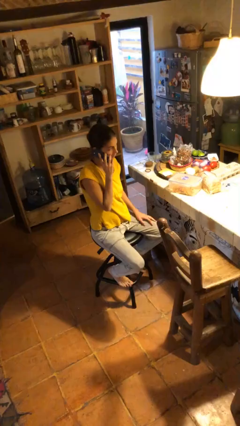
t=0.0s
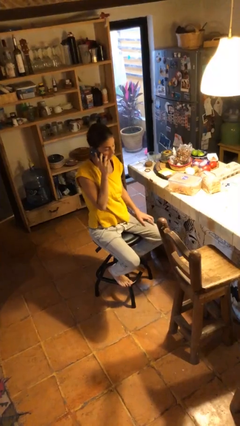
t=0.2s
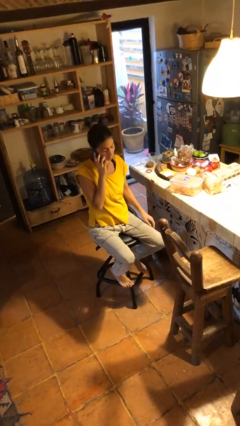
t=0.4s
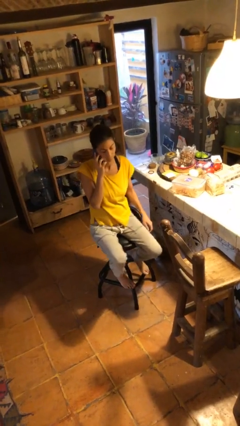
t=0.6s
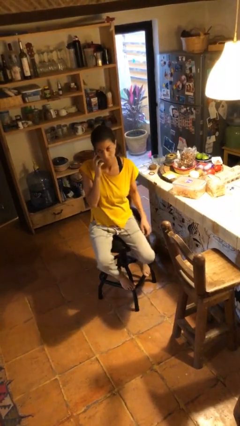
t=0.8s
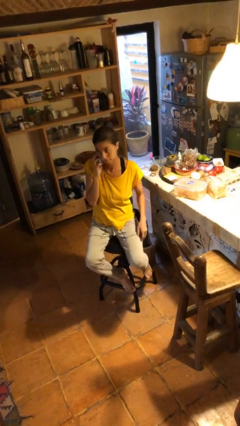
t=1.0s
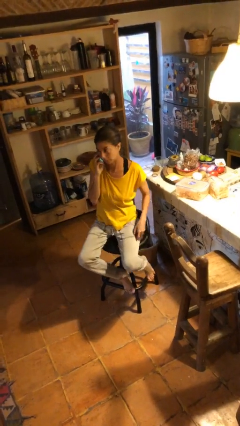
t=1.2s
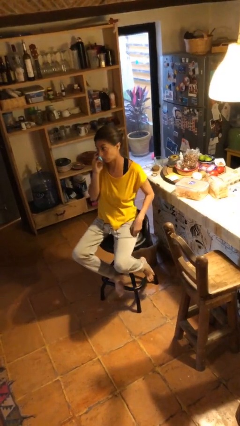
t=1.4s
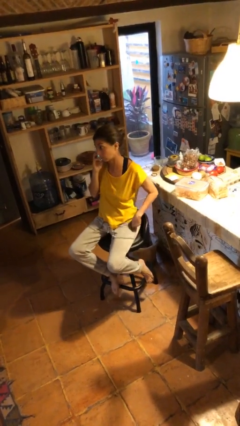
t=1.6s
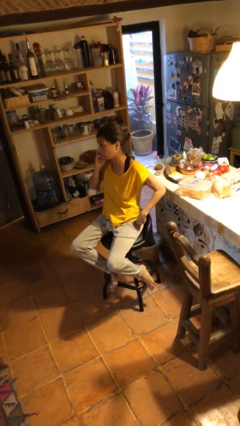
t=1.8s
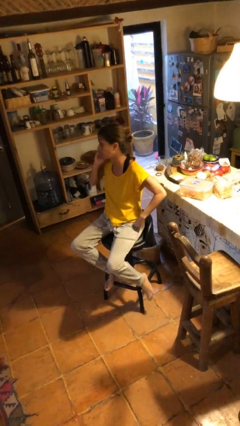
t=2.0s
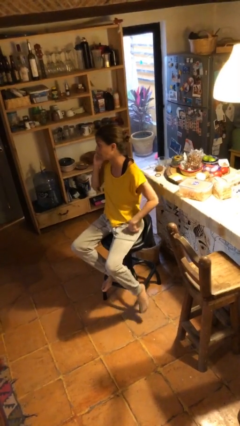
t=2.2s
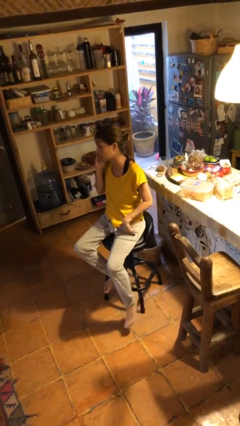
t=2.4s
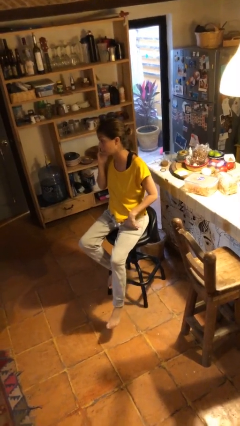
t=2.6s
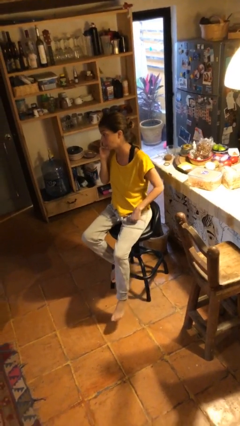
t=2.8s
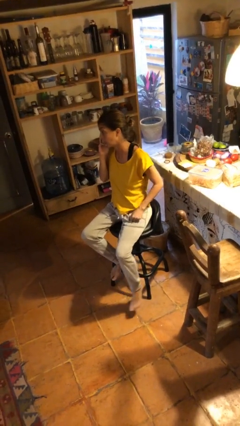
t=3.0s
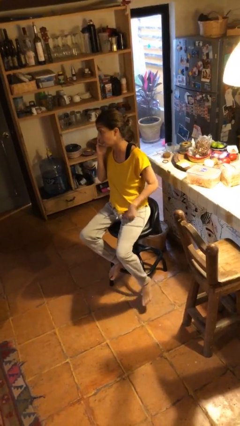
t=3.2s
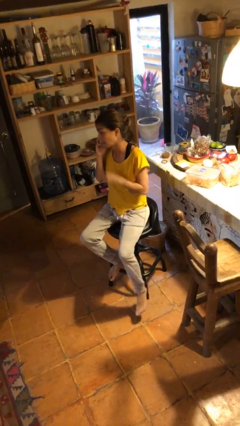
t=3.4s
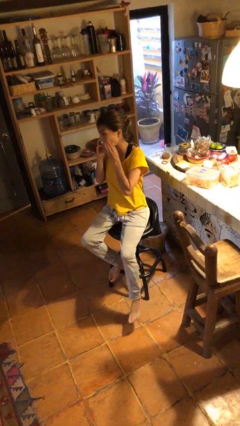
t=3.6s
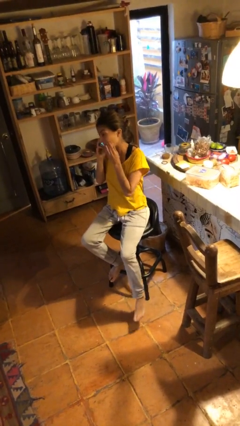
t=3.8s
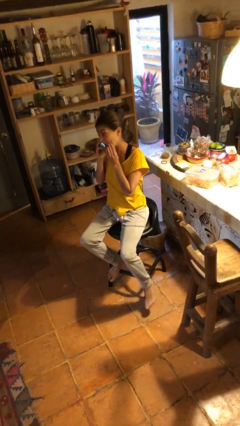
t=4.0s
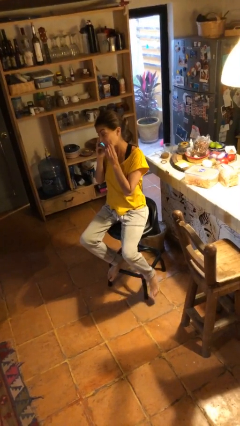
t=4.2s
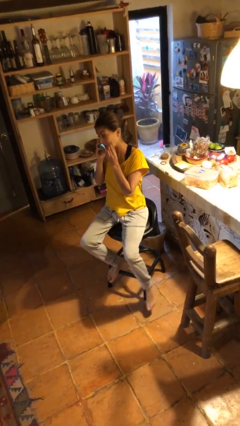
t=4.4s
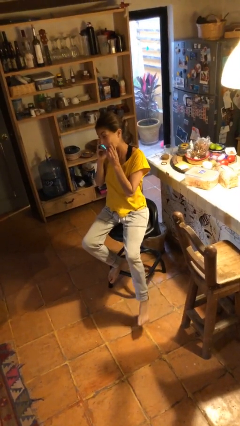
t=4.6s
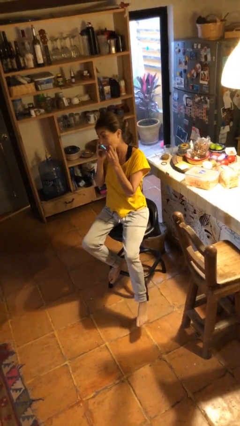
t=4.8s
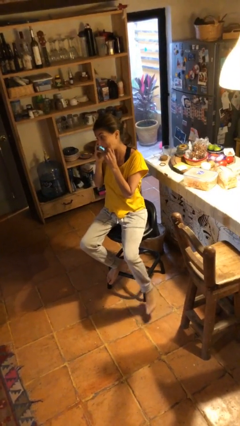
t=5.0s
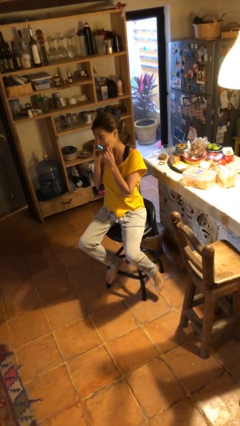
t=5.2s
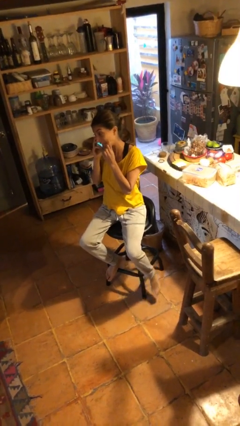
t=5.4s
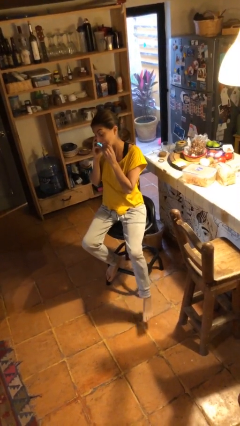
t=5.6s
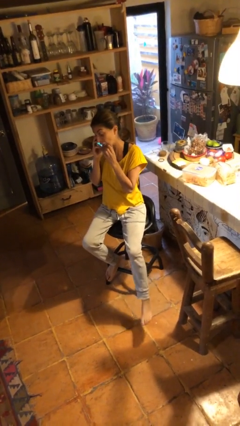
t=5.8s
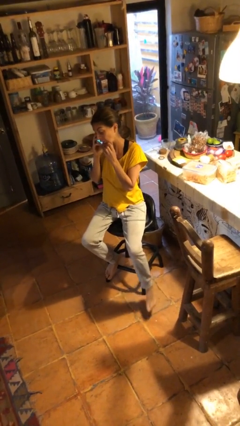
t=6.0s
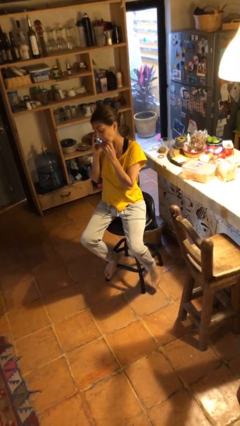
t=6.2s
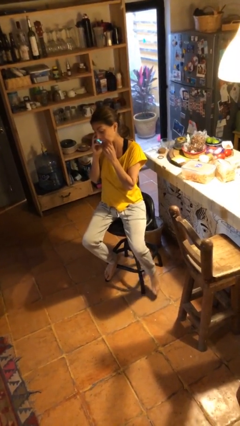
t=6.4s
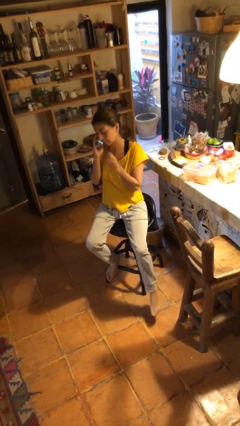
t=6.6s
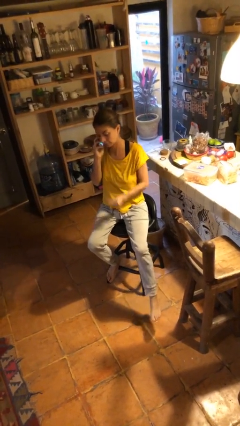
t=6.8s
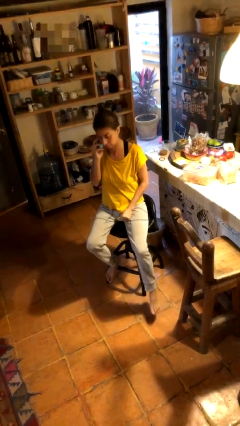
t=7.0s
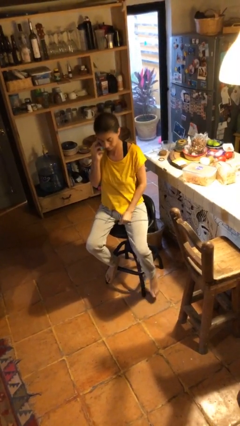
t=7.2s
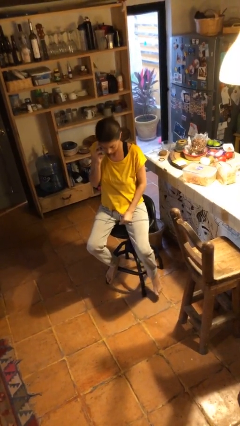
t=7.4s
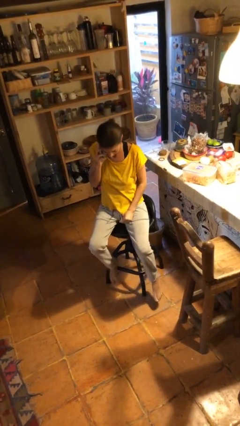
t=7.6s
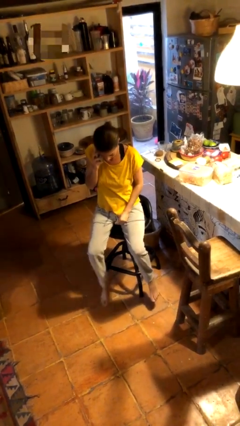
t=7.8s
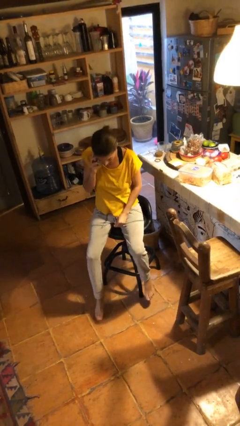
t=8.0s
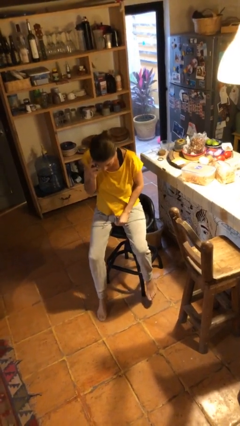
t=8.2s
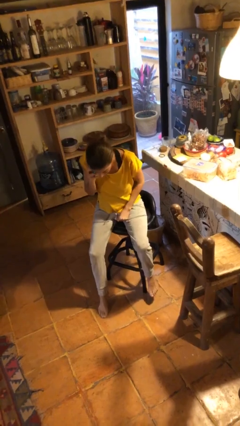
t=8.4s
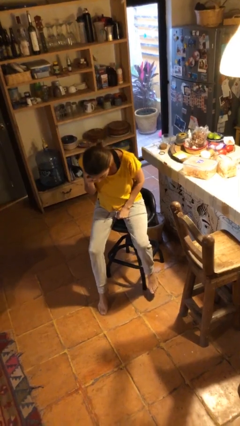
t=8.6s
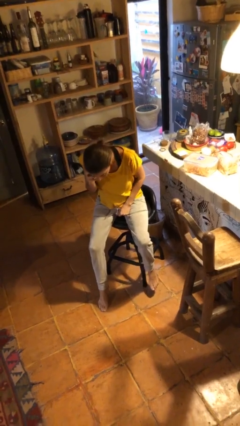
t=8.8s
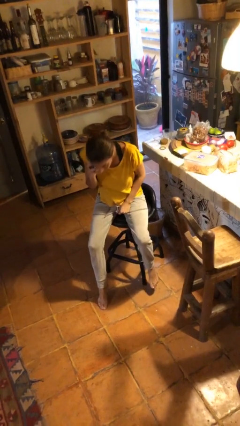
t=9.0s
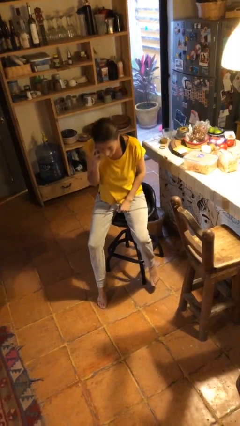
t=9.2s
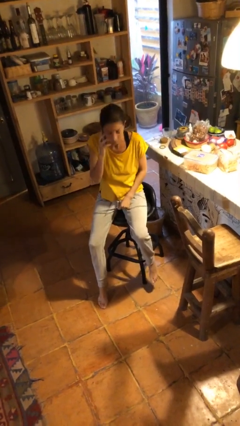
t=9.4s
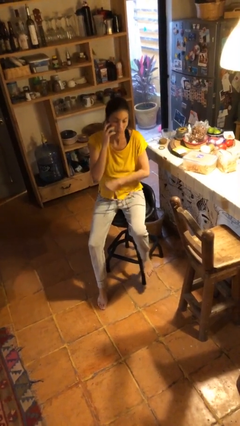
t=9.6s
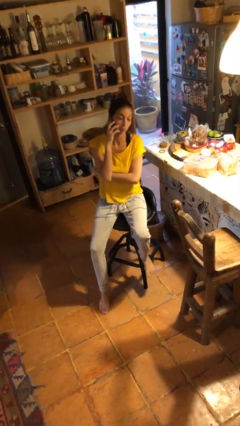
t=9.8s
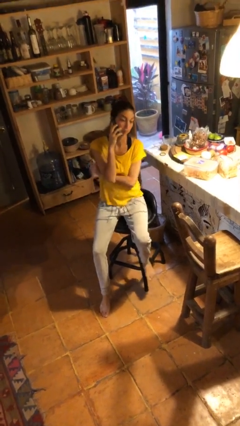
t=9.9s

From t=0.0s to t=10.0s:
person talks on phone

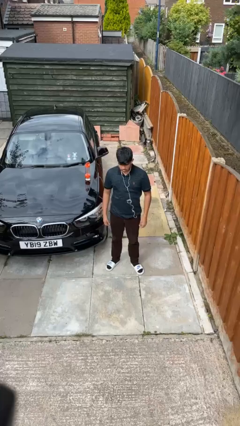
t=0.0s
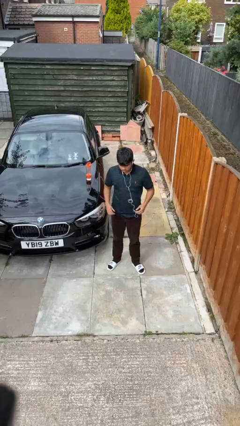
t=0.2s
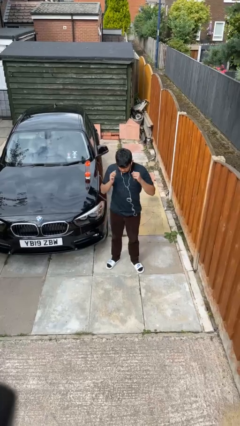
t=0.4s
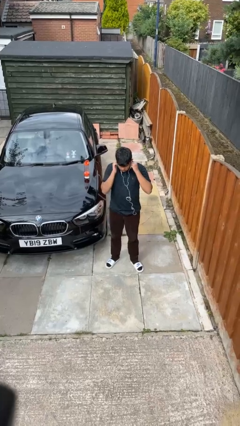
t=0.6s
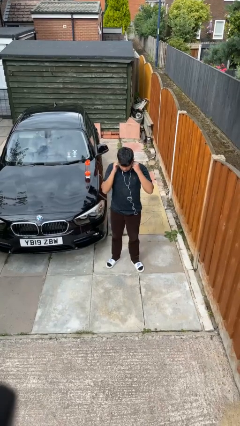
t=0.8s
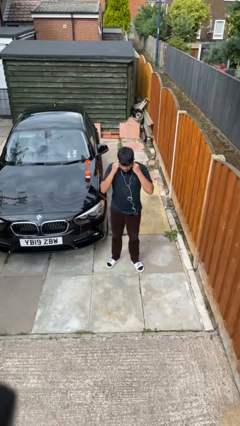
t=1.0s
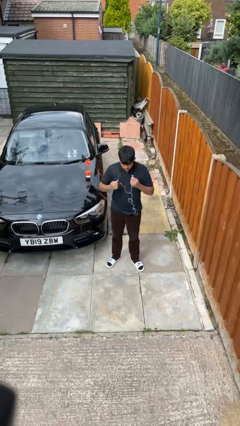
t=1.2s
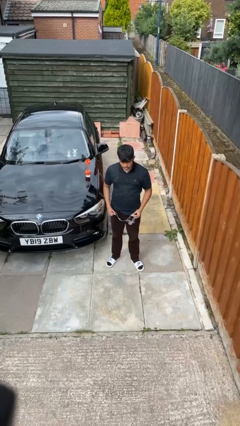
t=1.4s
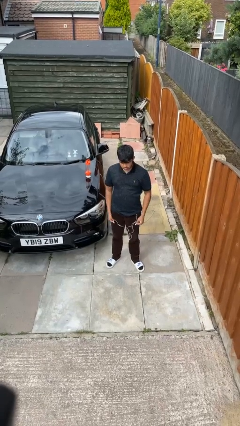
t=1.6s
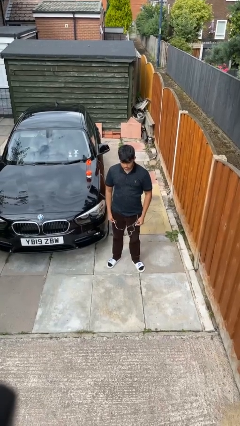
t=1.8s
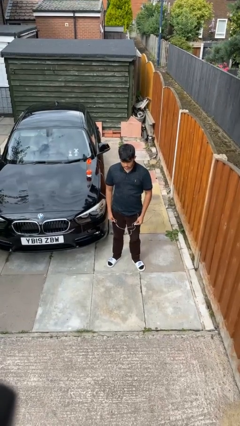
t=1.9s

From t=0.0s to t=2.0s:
person takes off headphones

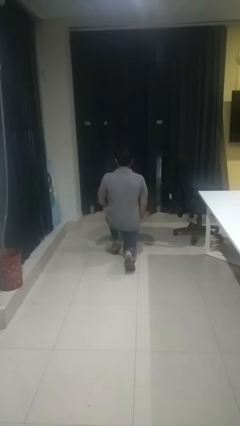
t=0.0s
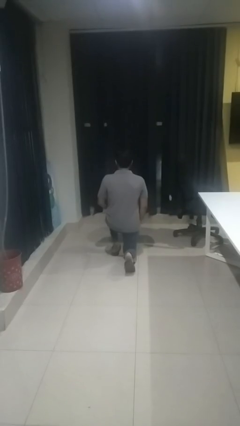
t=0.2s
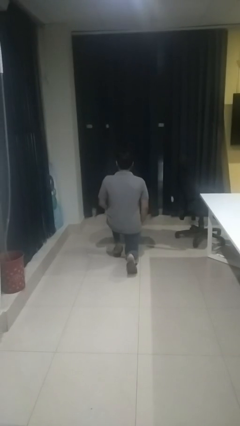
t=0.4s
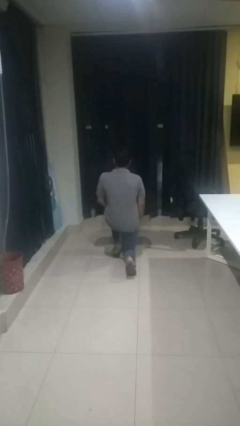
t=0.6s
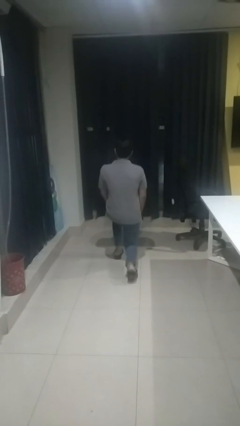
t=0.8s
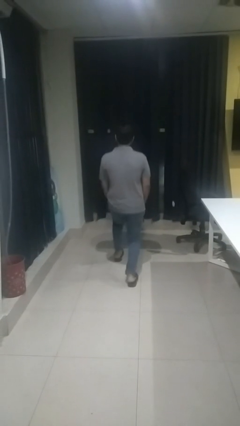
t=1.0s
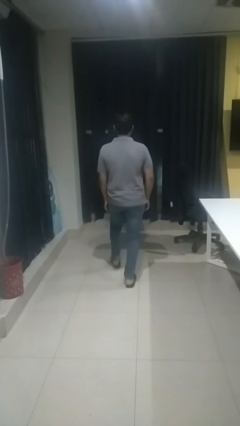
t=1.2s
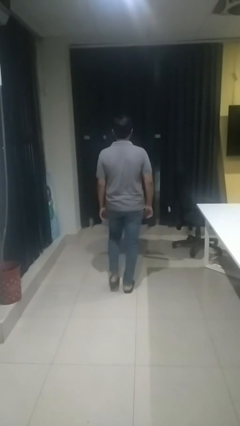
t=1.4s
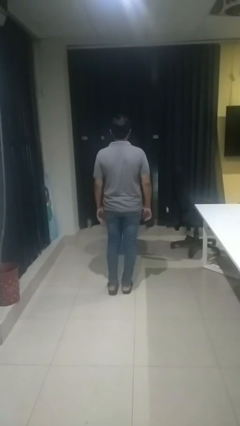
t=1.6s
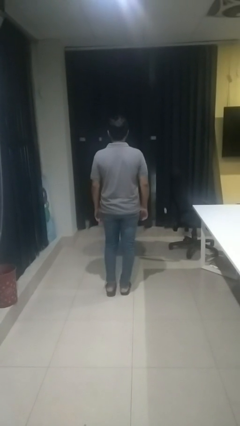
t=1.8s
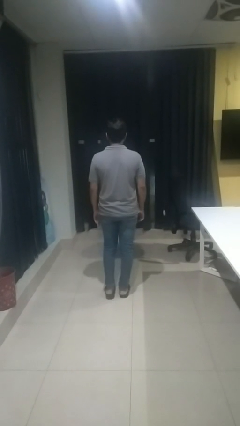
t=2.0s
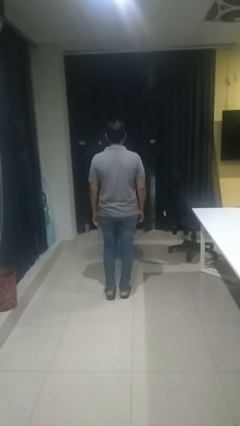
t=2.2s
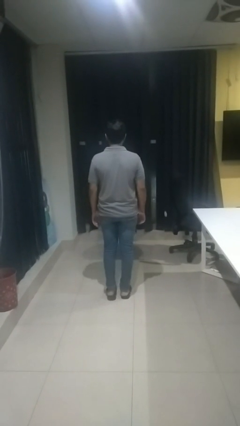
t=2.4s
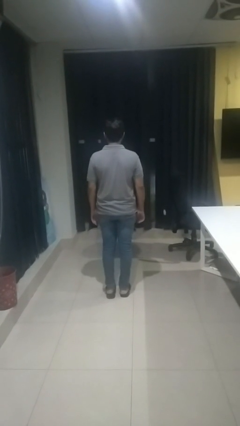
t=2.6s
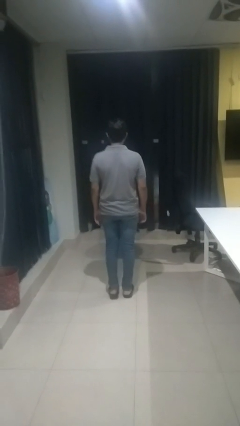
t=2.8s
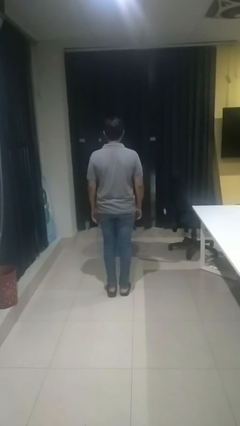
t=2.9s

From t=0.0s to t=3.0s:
person stands up from floor

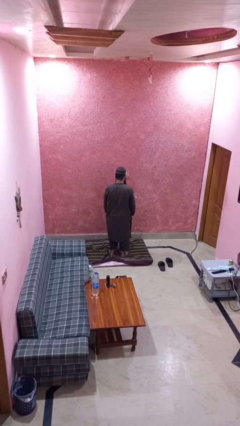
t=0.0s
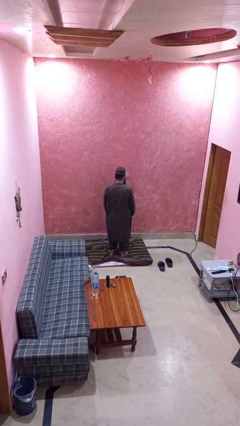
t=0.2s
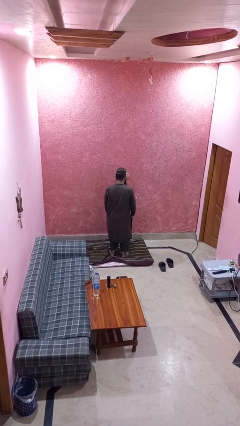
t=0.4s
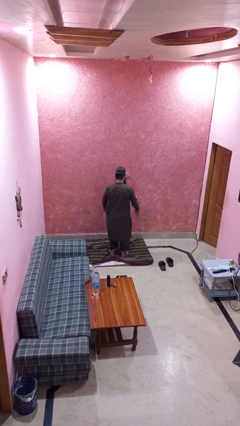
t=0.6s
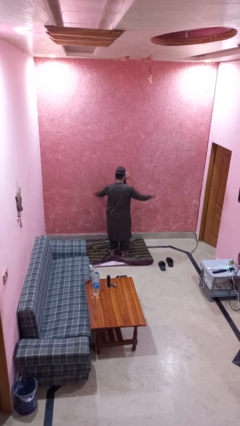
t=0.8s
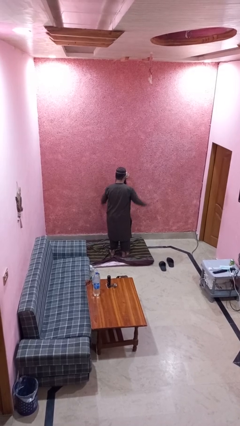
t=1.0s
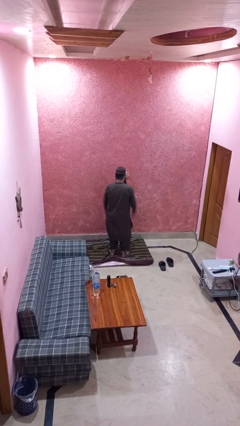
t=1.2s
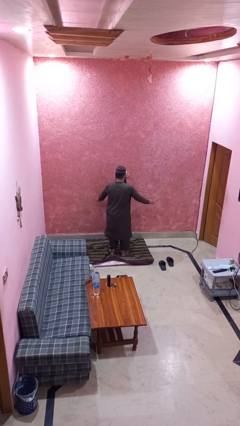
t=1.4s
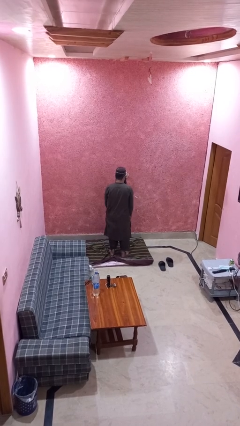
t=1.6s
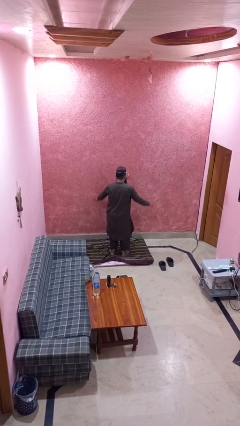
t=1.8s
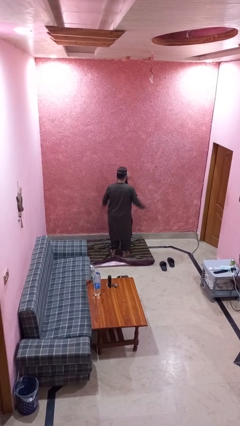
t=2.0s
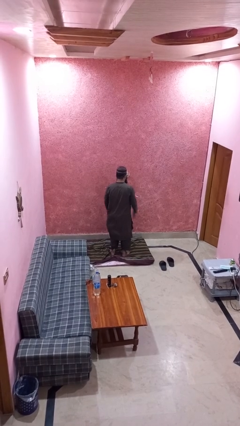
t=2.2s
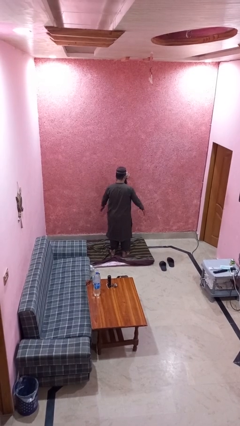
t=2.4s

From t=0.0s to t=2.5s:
person slaps hands on thighs

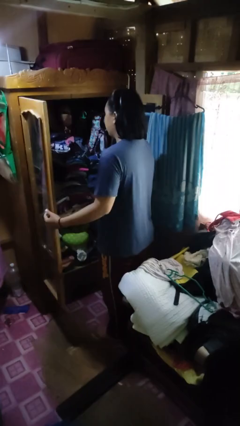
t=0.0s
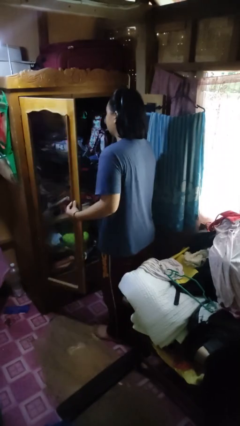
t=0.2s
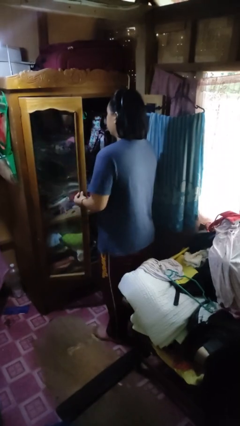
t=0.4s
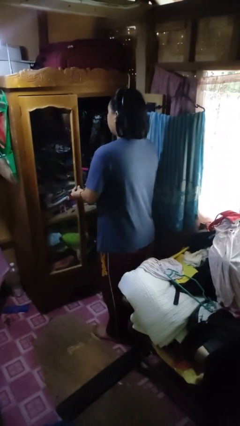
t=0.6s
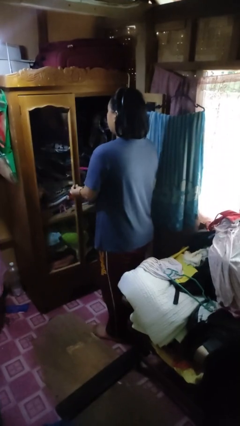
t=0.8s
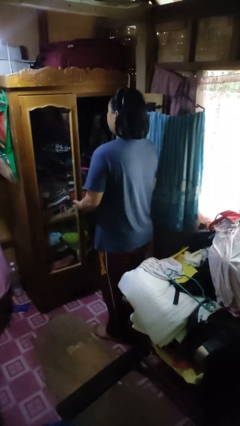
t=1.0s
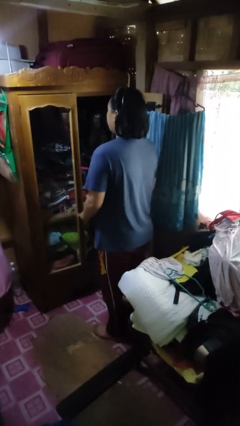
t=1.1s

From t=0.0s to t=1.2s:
person closes closet door
